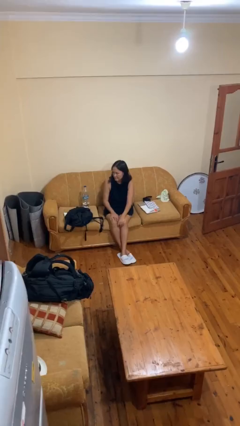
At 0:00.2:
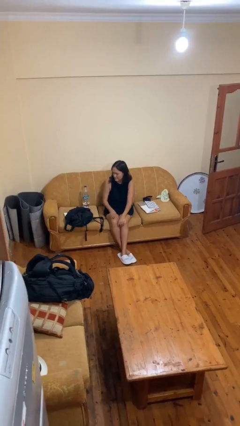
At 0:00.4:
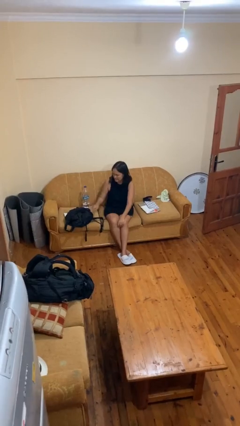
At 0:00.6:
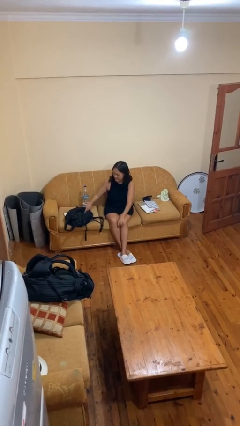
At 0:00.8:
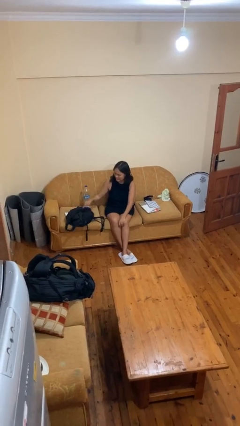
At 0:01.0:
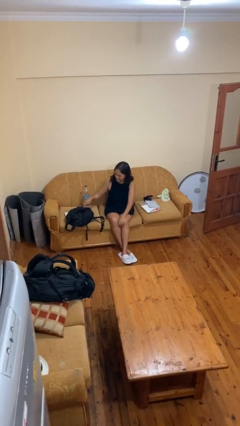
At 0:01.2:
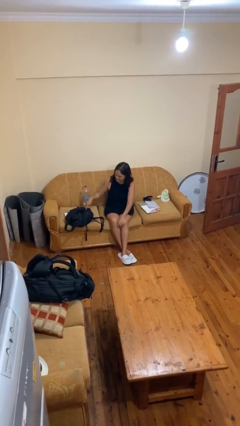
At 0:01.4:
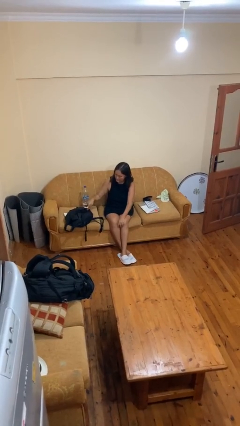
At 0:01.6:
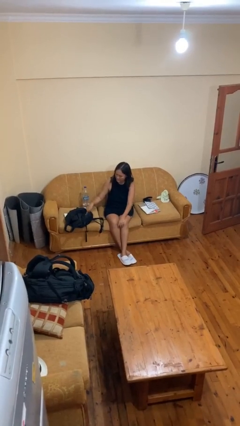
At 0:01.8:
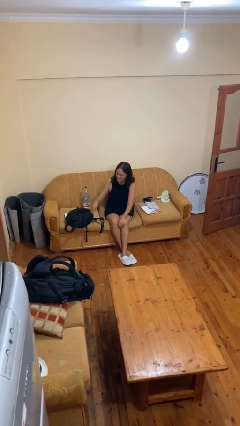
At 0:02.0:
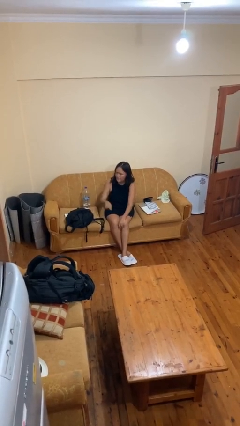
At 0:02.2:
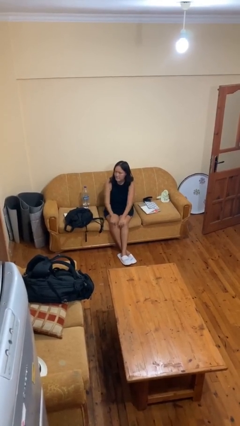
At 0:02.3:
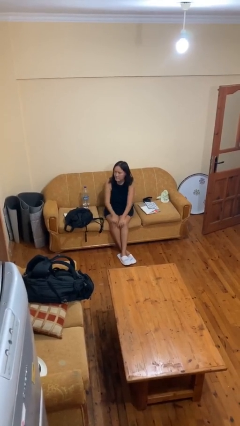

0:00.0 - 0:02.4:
person taps object with finger

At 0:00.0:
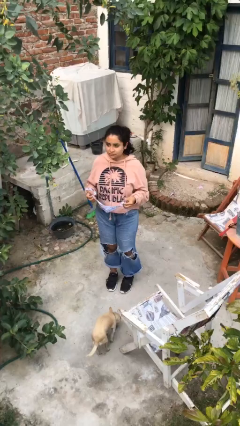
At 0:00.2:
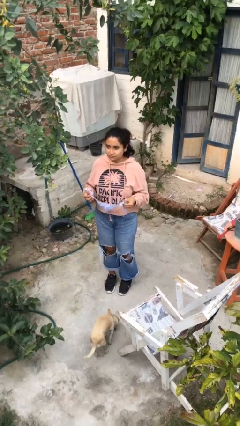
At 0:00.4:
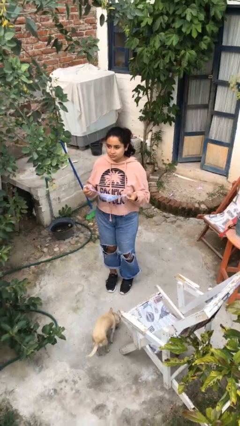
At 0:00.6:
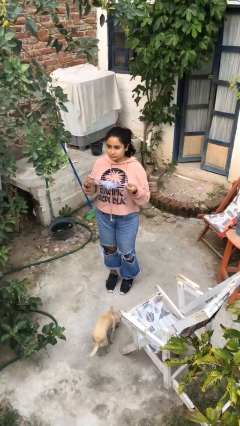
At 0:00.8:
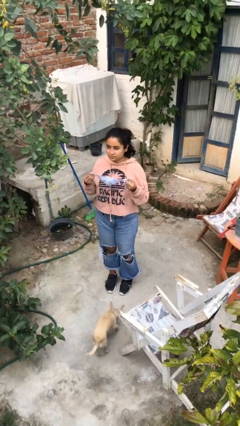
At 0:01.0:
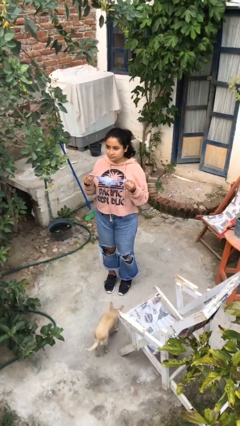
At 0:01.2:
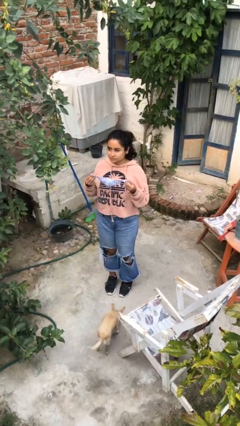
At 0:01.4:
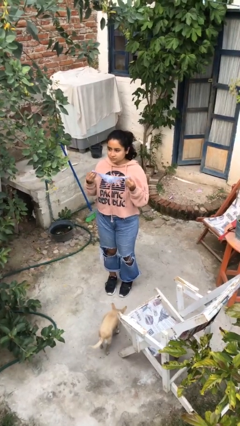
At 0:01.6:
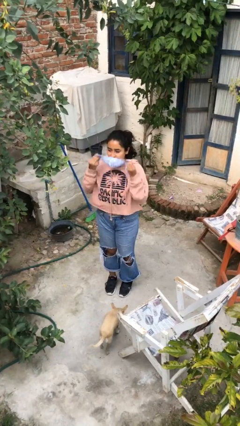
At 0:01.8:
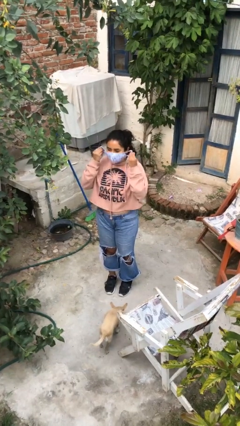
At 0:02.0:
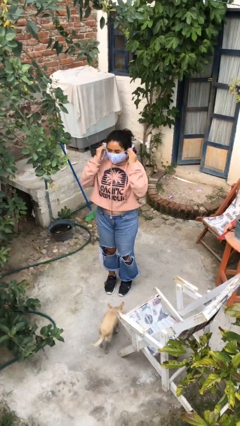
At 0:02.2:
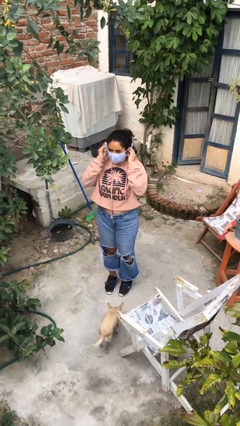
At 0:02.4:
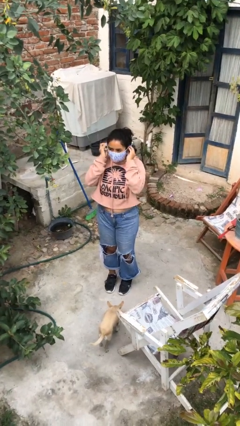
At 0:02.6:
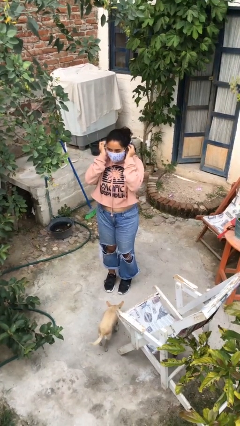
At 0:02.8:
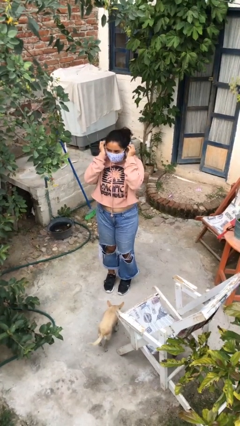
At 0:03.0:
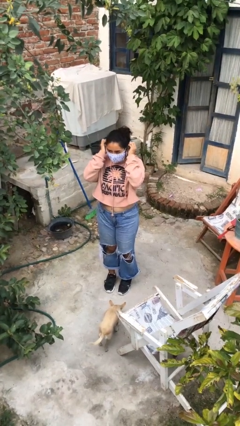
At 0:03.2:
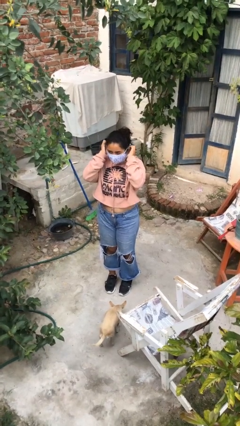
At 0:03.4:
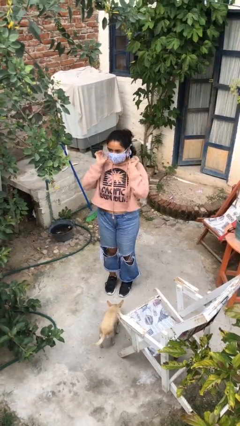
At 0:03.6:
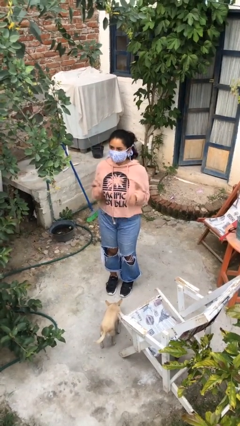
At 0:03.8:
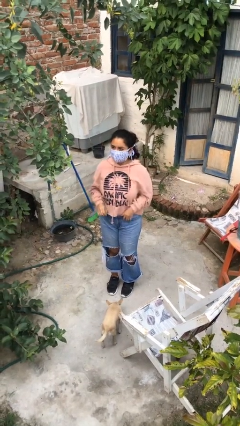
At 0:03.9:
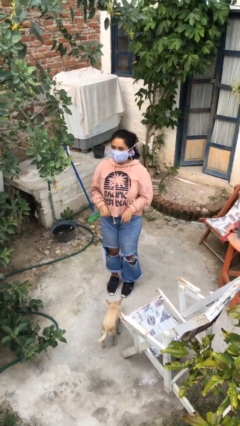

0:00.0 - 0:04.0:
person puts on facemask

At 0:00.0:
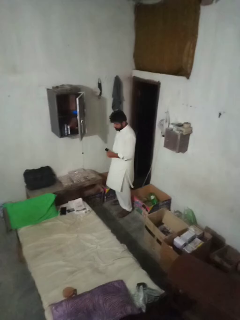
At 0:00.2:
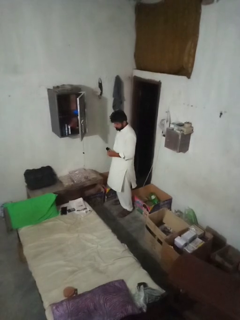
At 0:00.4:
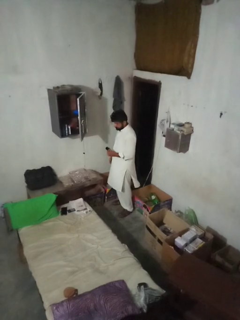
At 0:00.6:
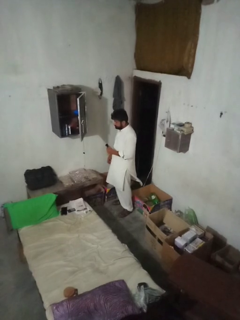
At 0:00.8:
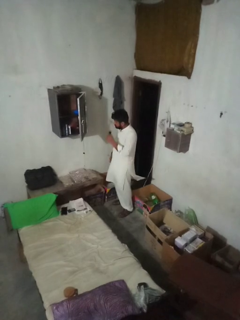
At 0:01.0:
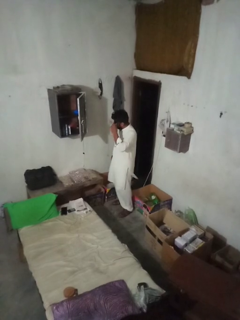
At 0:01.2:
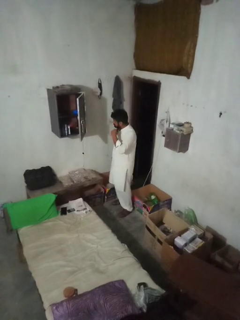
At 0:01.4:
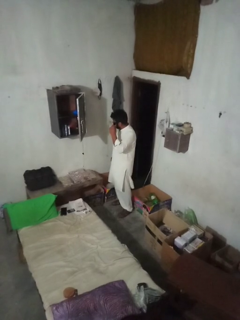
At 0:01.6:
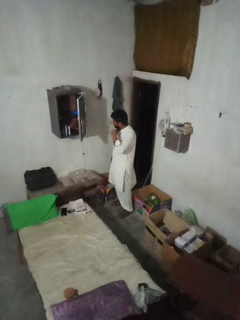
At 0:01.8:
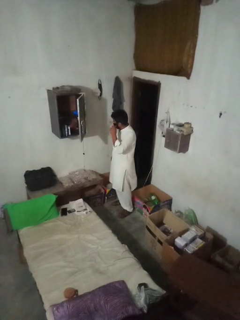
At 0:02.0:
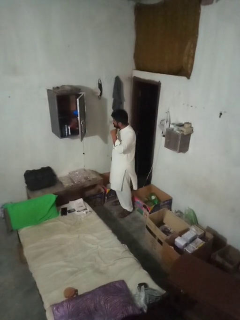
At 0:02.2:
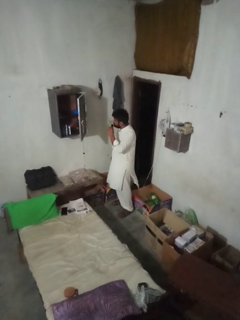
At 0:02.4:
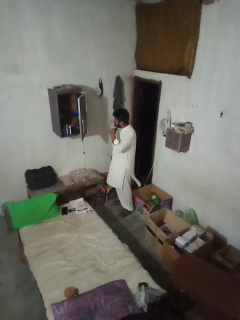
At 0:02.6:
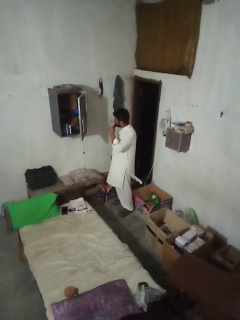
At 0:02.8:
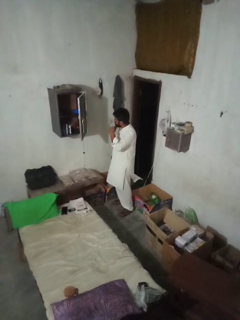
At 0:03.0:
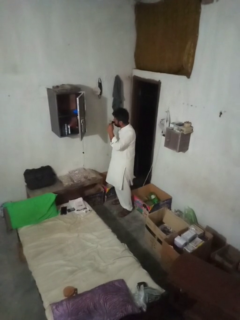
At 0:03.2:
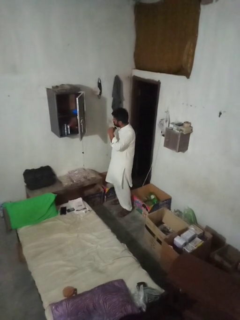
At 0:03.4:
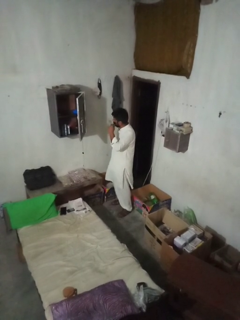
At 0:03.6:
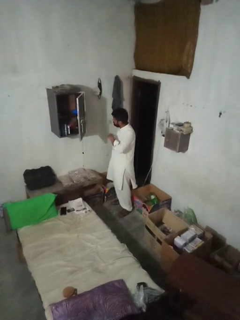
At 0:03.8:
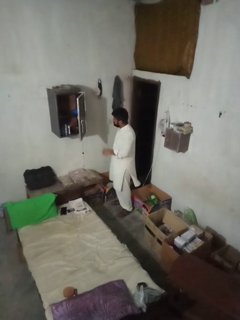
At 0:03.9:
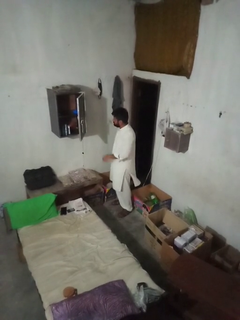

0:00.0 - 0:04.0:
person applies foundation makeup

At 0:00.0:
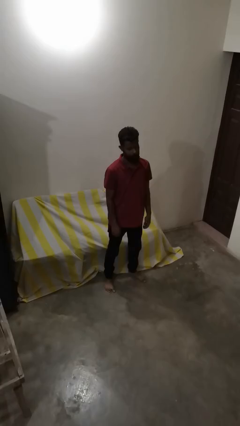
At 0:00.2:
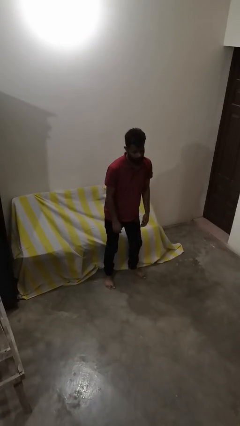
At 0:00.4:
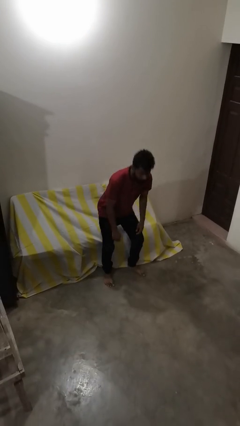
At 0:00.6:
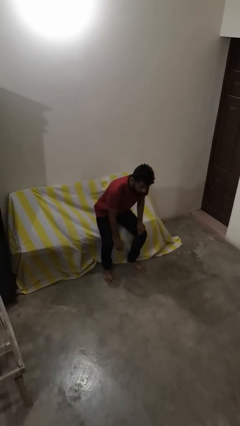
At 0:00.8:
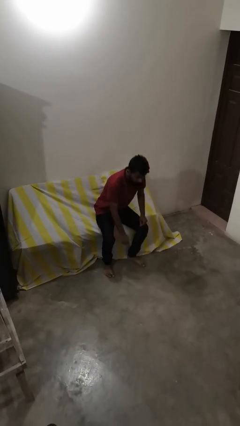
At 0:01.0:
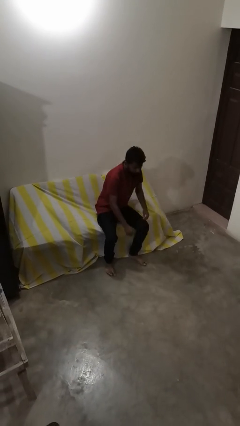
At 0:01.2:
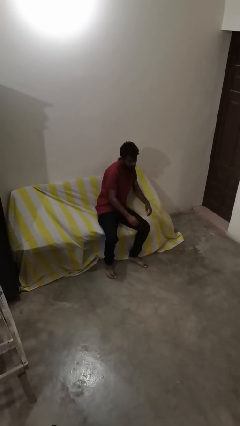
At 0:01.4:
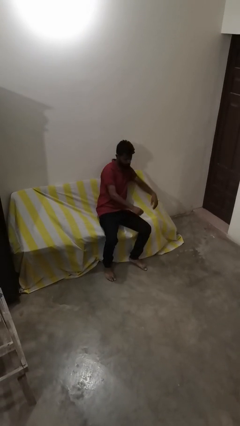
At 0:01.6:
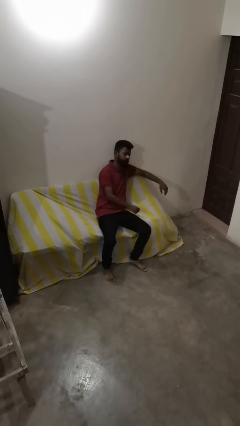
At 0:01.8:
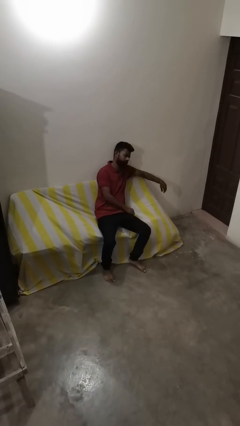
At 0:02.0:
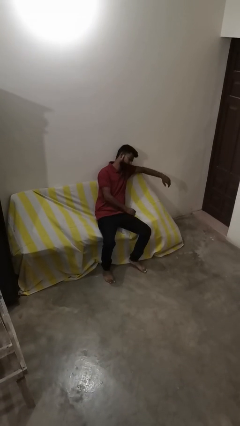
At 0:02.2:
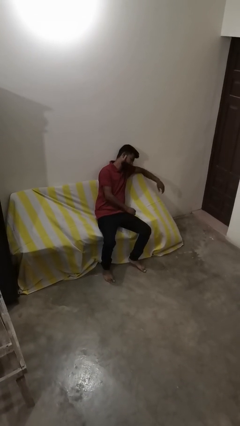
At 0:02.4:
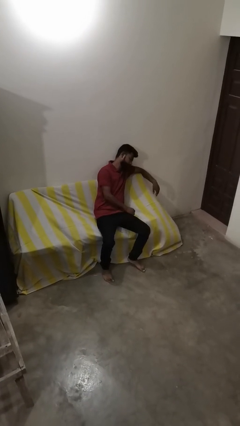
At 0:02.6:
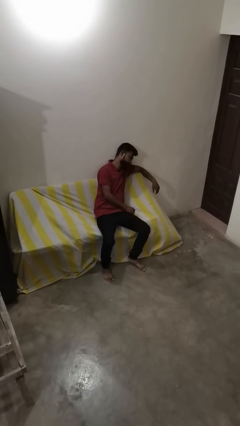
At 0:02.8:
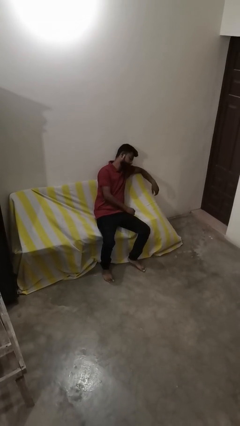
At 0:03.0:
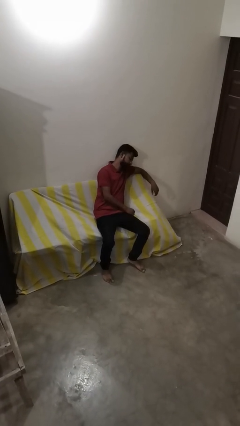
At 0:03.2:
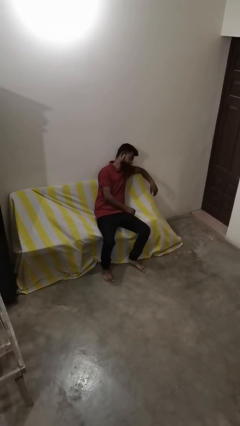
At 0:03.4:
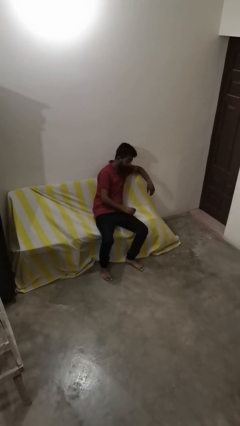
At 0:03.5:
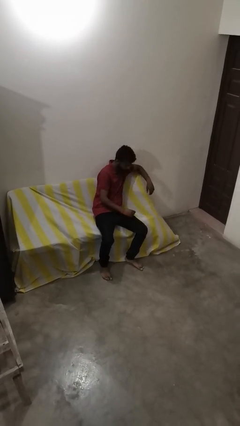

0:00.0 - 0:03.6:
person lies down on couch

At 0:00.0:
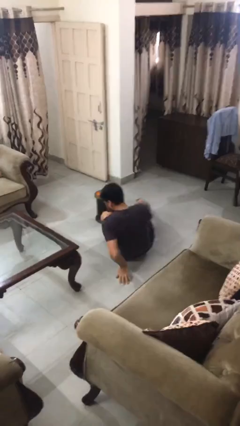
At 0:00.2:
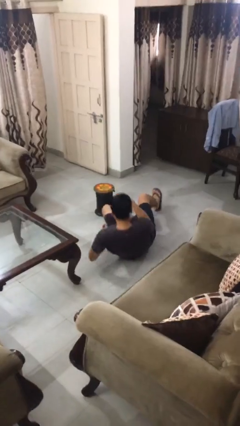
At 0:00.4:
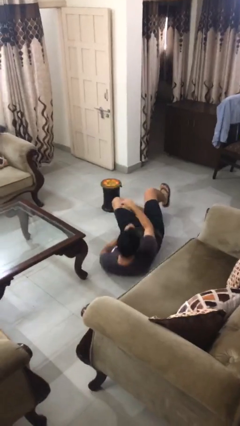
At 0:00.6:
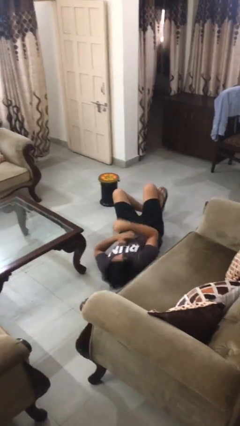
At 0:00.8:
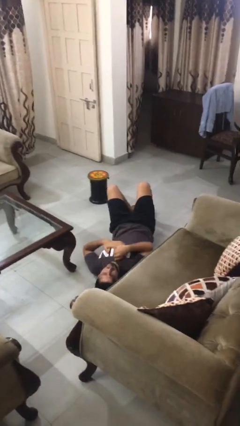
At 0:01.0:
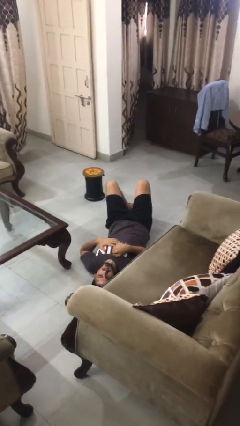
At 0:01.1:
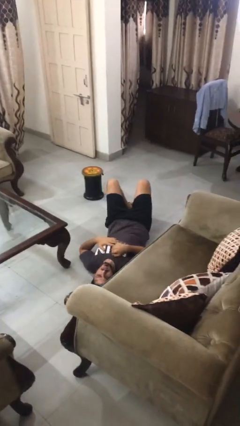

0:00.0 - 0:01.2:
person lies down on floor

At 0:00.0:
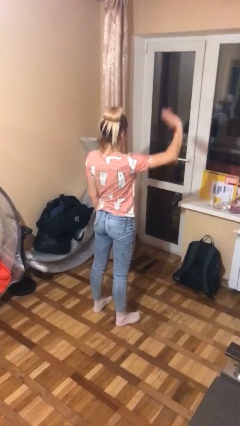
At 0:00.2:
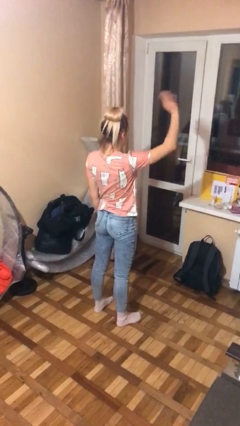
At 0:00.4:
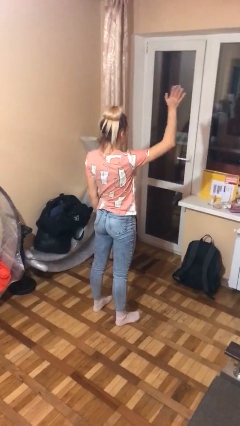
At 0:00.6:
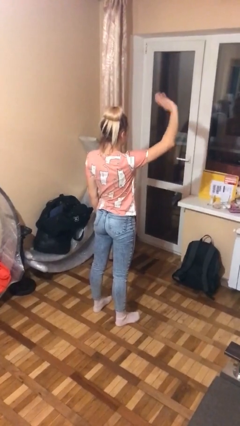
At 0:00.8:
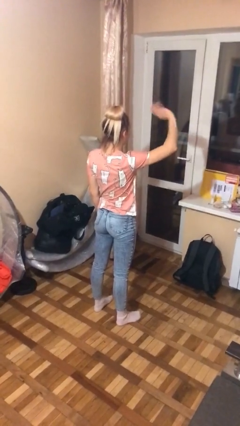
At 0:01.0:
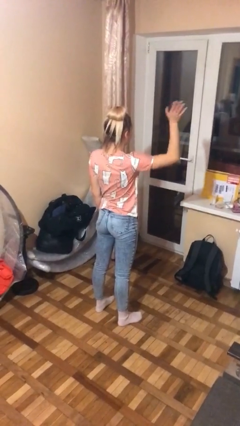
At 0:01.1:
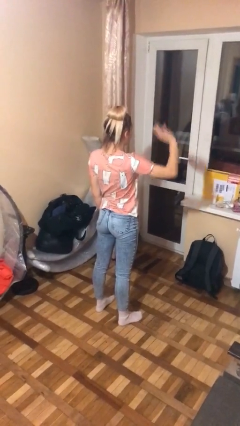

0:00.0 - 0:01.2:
person salutes

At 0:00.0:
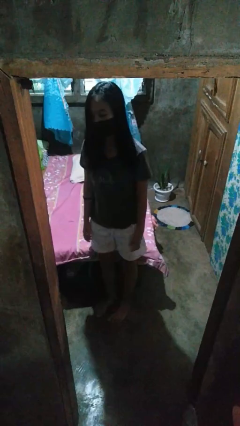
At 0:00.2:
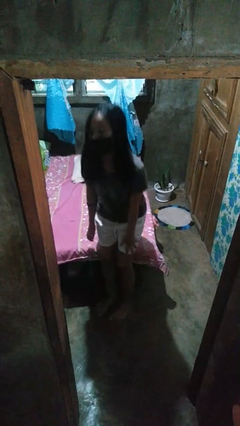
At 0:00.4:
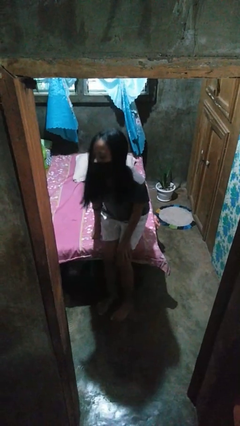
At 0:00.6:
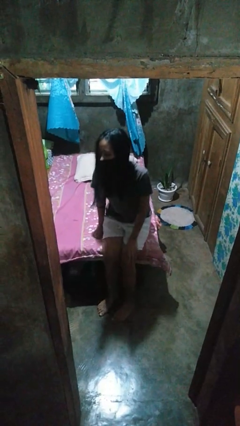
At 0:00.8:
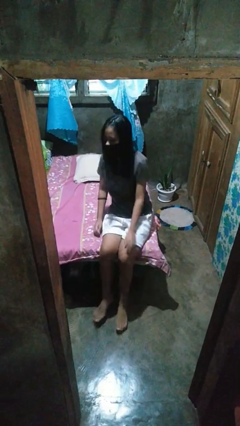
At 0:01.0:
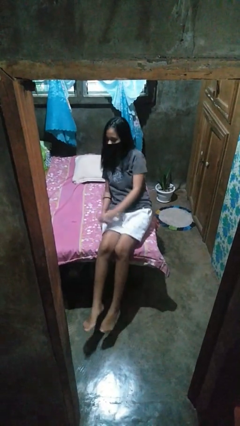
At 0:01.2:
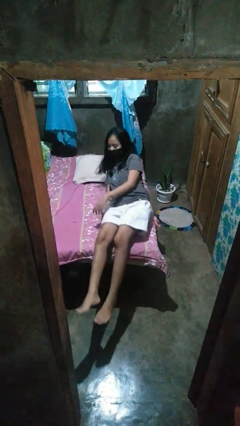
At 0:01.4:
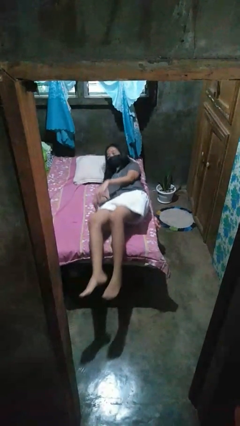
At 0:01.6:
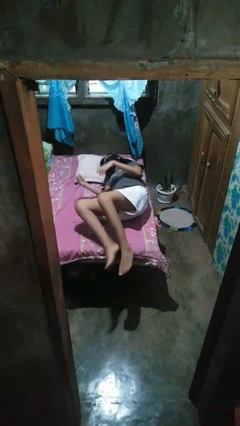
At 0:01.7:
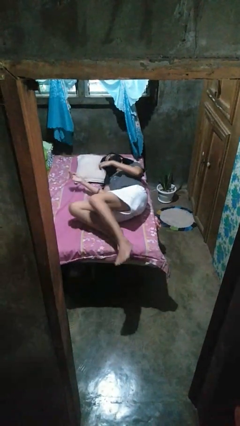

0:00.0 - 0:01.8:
person lies down on bed
